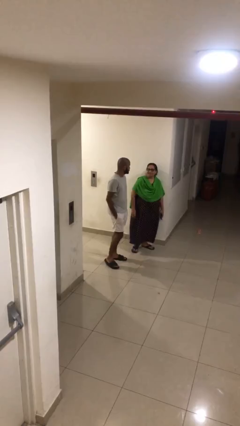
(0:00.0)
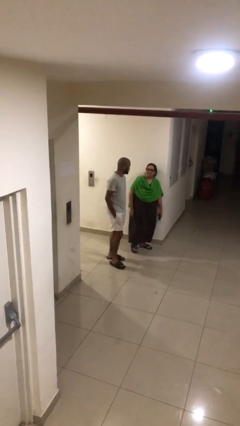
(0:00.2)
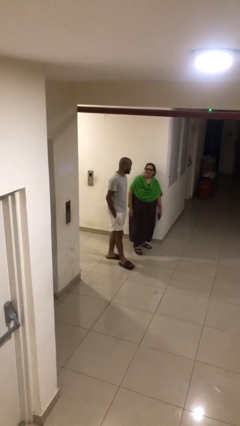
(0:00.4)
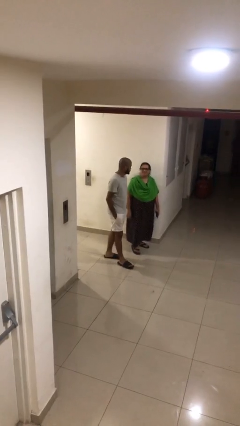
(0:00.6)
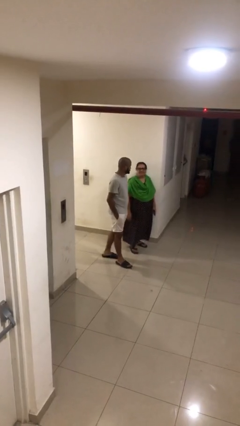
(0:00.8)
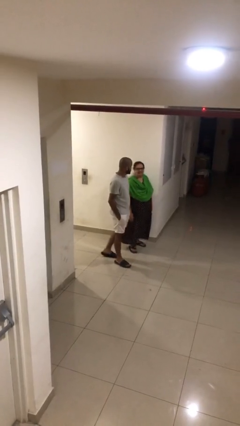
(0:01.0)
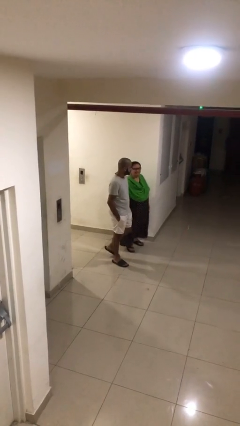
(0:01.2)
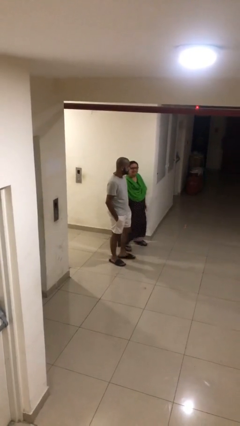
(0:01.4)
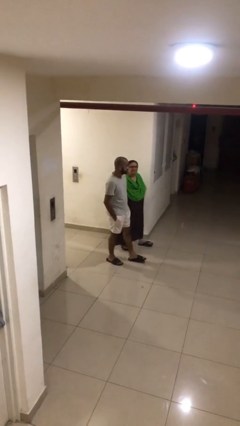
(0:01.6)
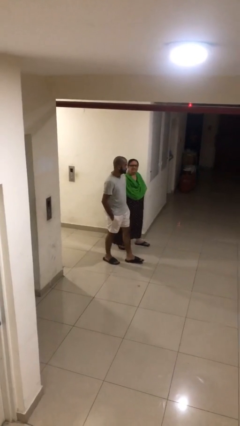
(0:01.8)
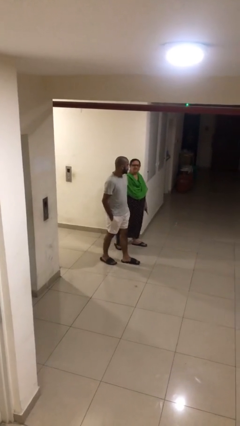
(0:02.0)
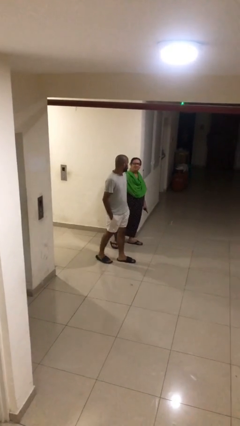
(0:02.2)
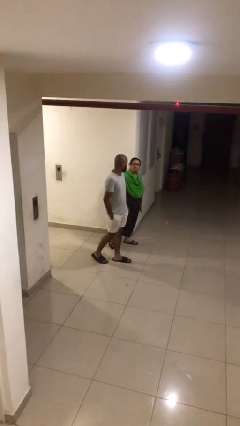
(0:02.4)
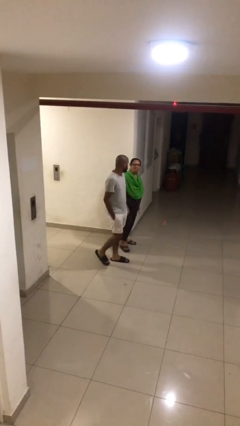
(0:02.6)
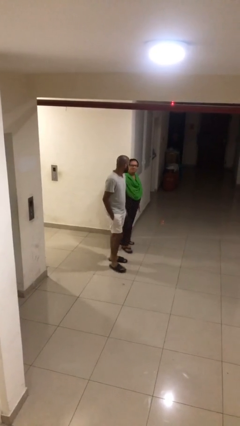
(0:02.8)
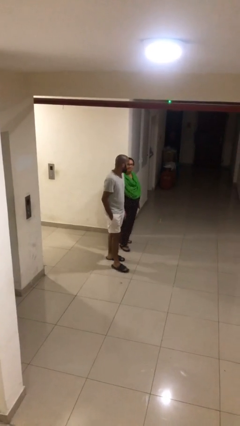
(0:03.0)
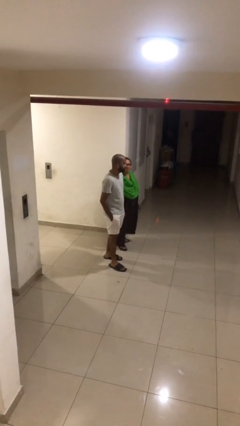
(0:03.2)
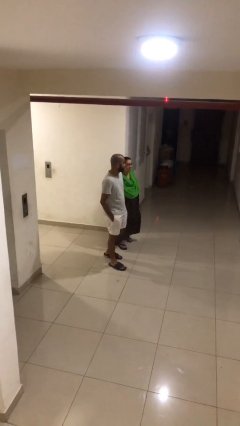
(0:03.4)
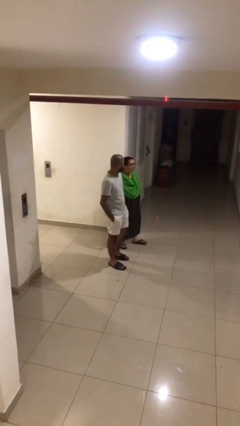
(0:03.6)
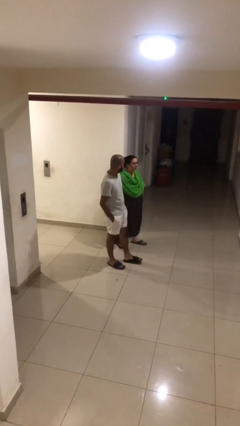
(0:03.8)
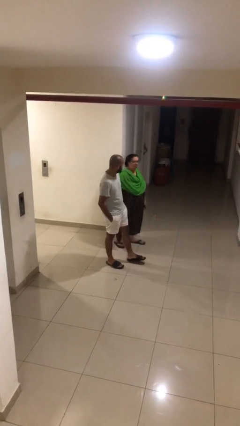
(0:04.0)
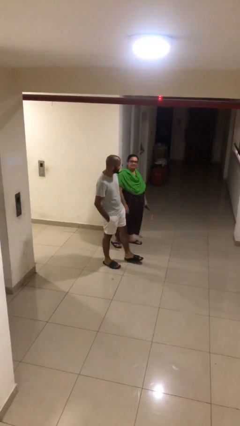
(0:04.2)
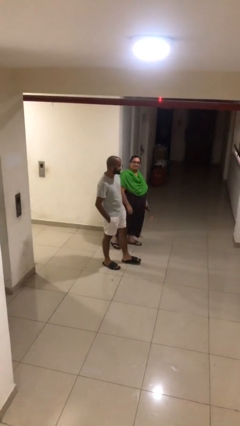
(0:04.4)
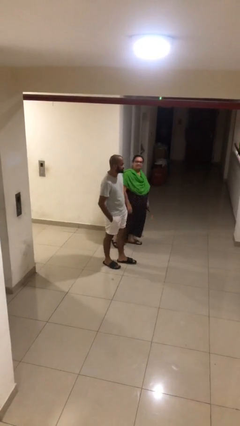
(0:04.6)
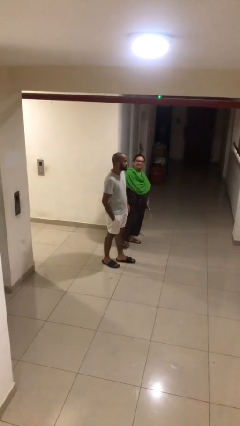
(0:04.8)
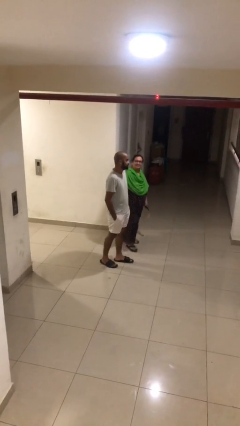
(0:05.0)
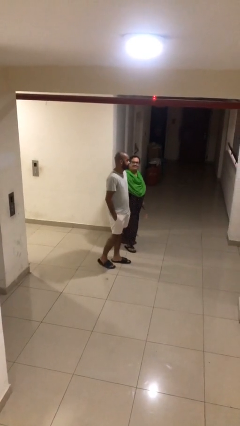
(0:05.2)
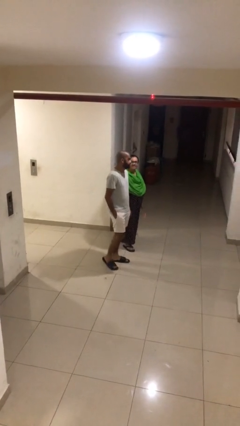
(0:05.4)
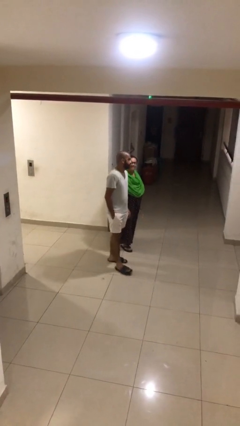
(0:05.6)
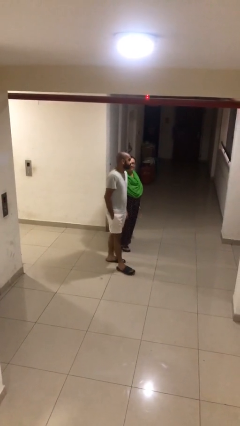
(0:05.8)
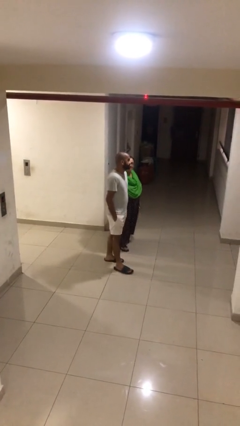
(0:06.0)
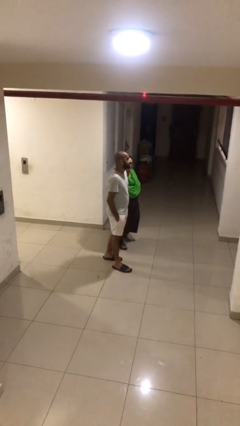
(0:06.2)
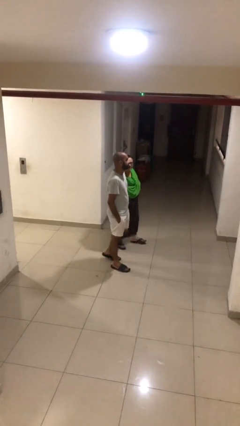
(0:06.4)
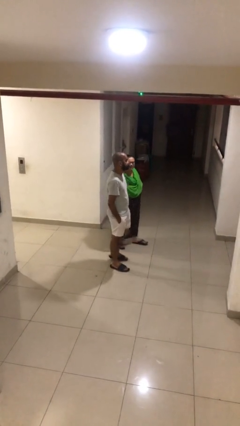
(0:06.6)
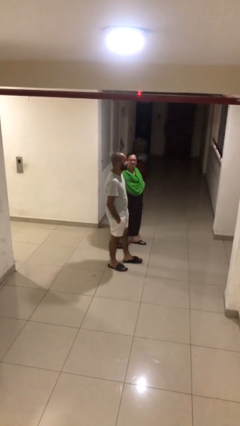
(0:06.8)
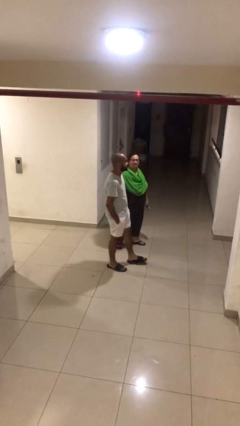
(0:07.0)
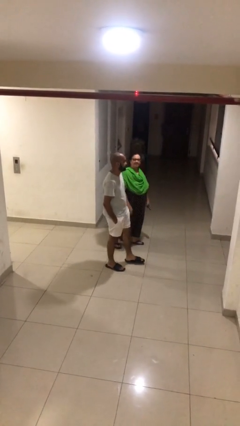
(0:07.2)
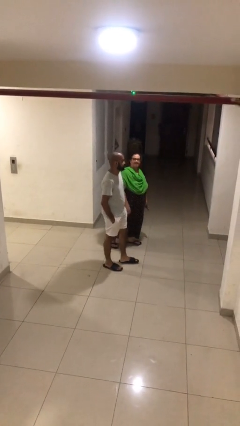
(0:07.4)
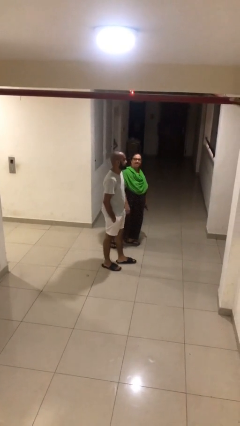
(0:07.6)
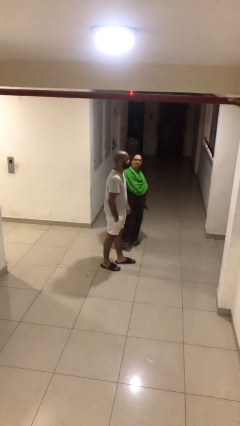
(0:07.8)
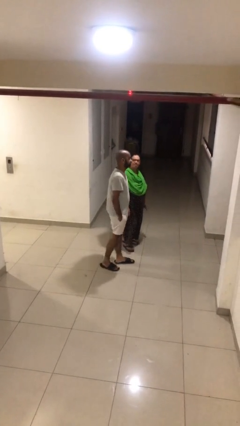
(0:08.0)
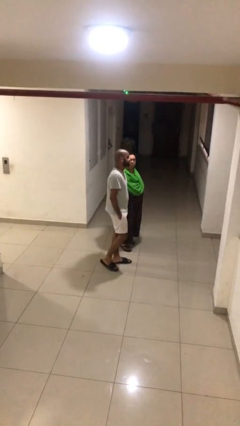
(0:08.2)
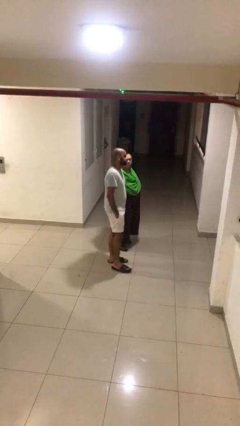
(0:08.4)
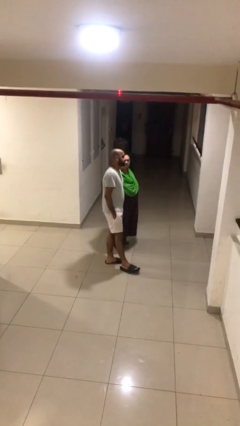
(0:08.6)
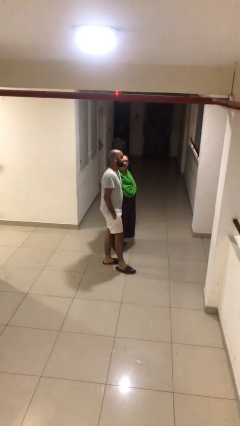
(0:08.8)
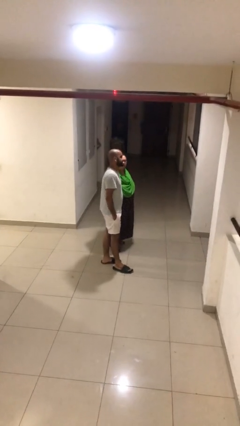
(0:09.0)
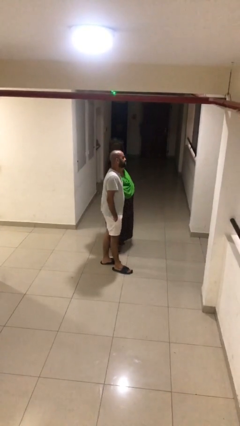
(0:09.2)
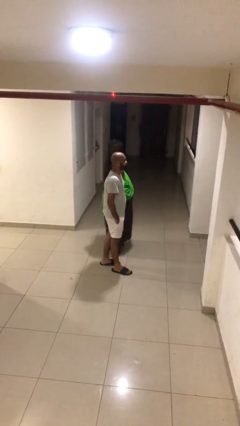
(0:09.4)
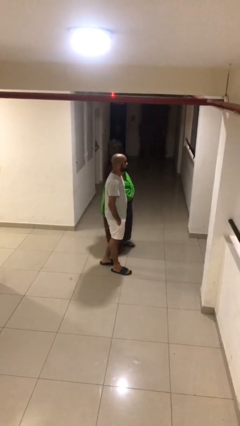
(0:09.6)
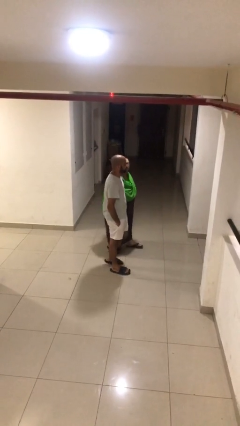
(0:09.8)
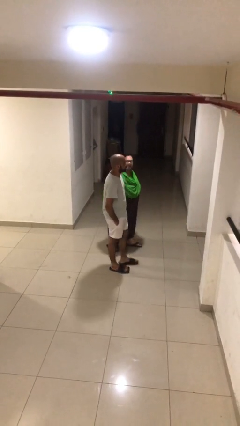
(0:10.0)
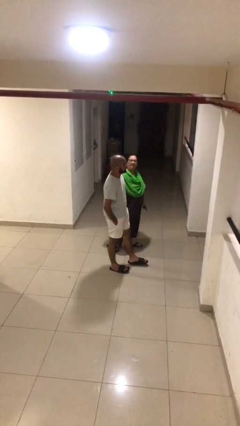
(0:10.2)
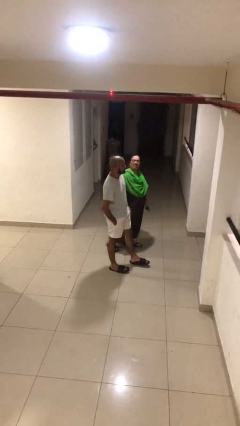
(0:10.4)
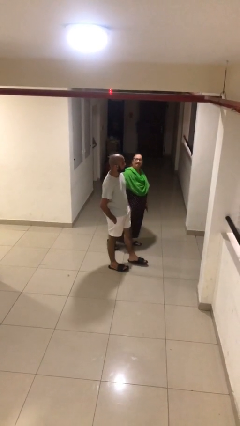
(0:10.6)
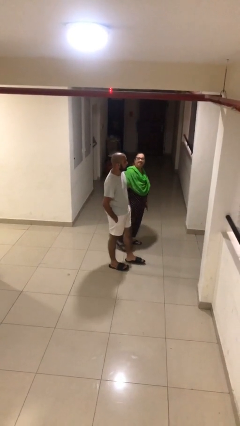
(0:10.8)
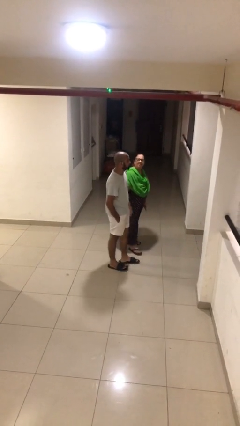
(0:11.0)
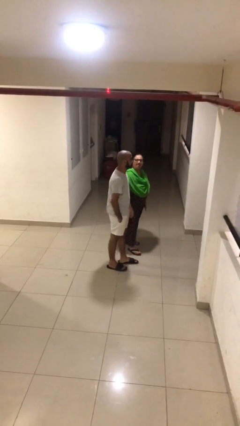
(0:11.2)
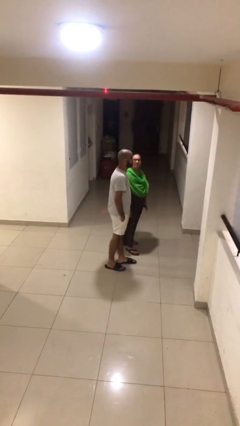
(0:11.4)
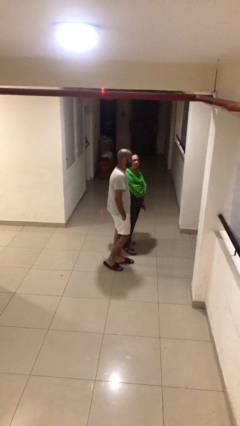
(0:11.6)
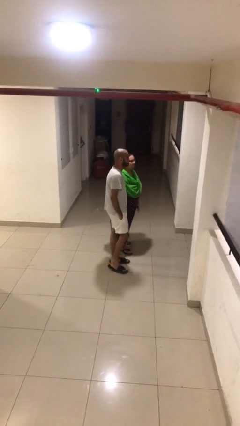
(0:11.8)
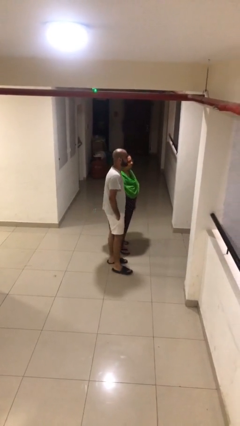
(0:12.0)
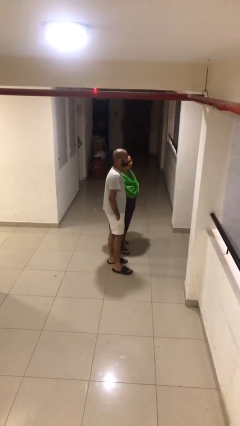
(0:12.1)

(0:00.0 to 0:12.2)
person talks to person

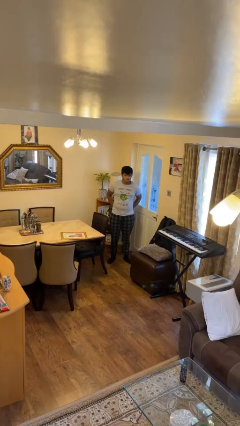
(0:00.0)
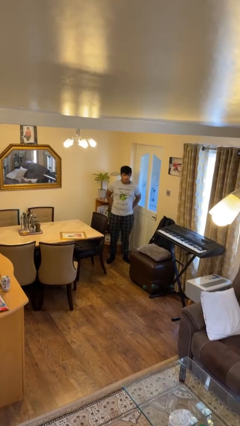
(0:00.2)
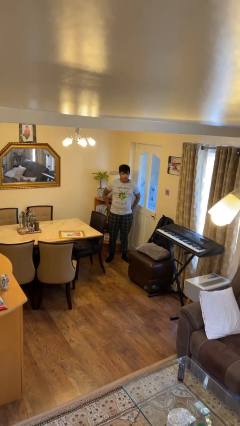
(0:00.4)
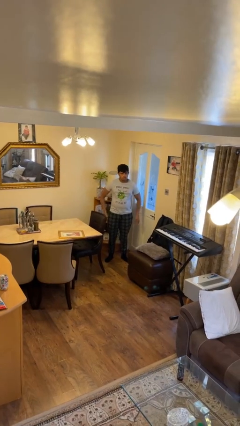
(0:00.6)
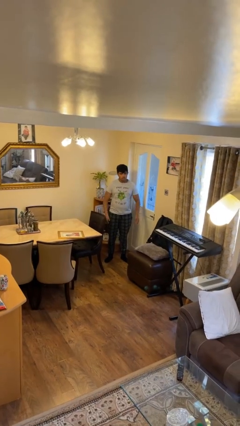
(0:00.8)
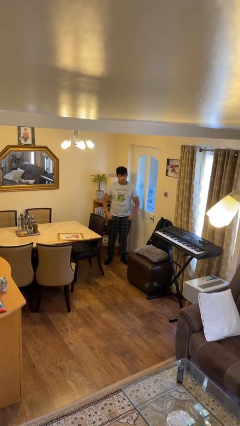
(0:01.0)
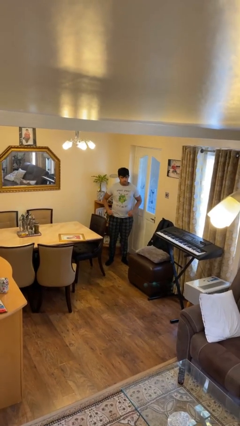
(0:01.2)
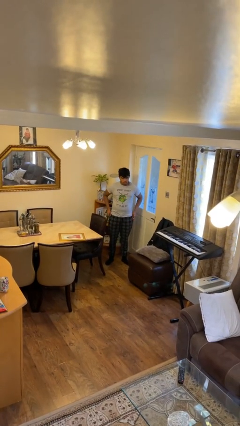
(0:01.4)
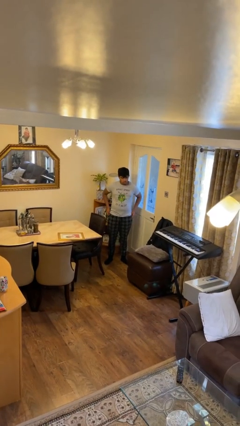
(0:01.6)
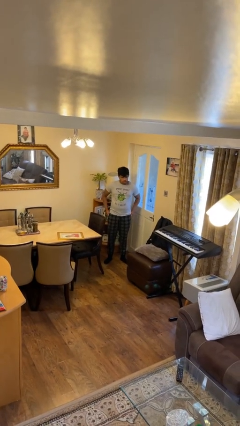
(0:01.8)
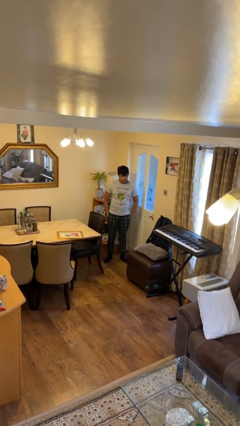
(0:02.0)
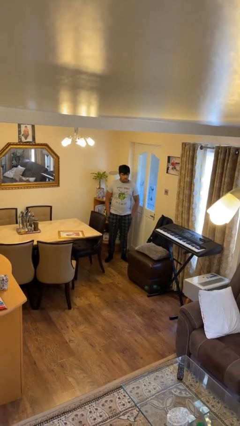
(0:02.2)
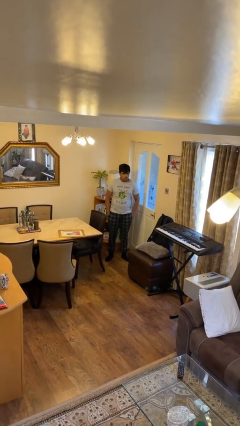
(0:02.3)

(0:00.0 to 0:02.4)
person puts hands in back pockets

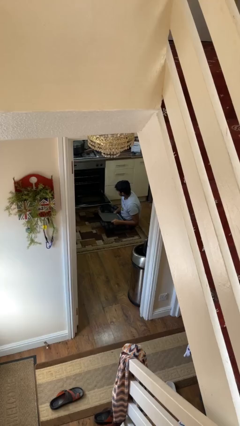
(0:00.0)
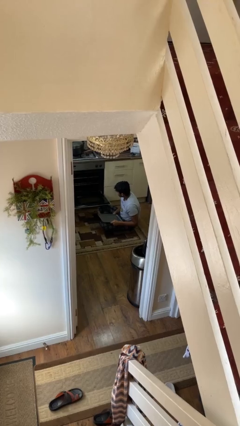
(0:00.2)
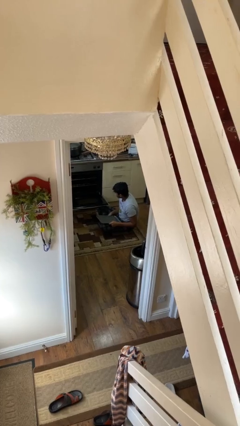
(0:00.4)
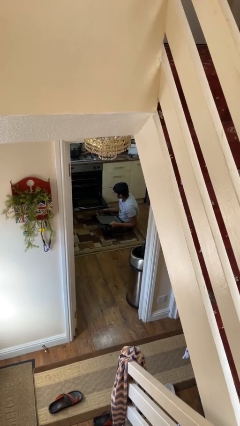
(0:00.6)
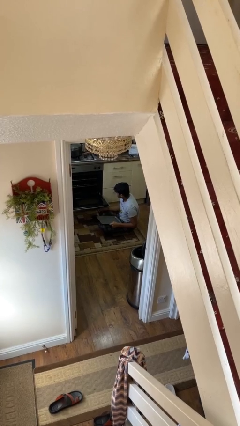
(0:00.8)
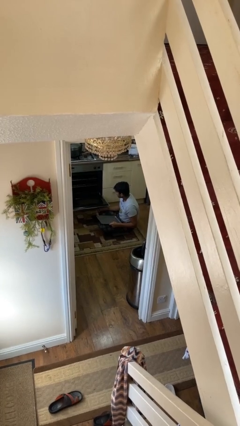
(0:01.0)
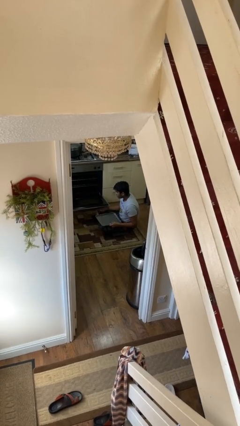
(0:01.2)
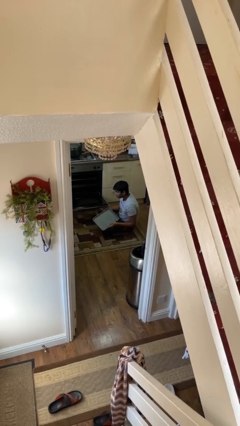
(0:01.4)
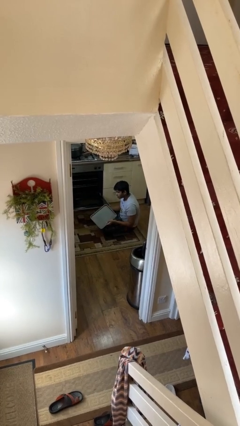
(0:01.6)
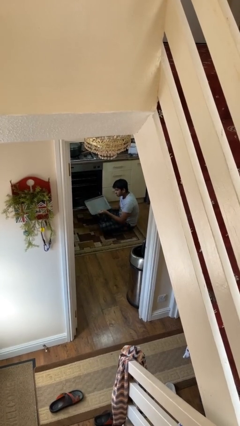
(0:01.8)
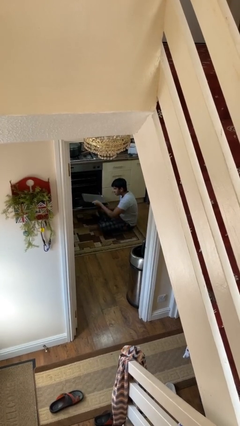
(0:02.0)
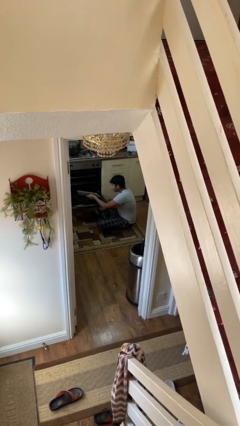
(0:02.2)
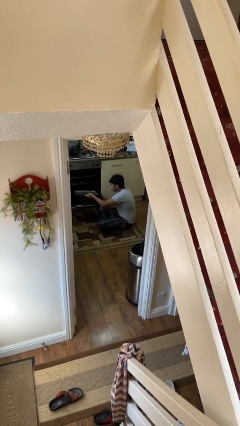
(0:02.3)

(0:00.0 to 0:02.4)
person puts object into oven

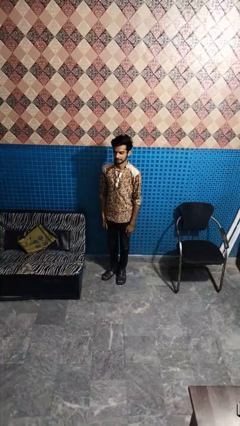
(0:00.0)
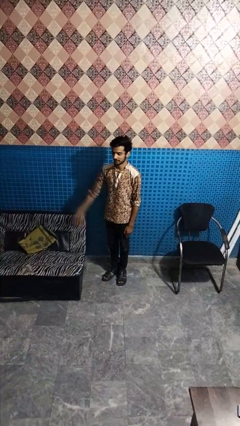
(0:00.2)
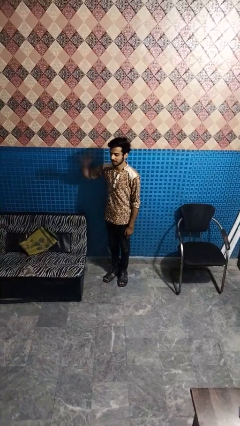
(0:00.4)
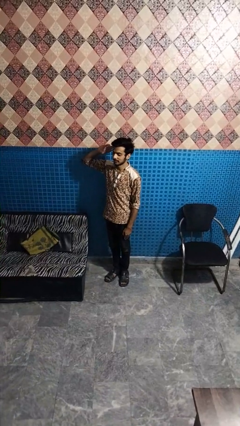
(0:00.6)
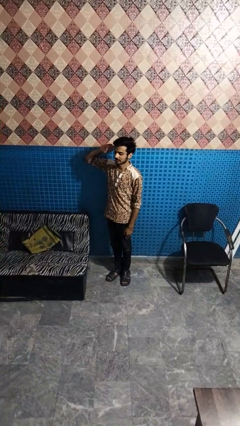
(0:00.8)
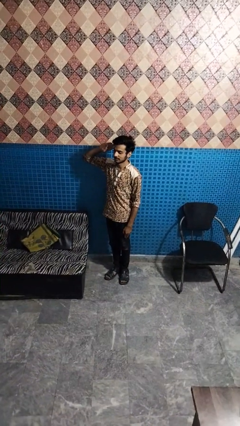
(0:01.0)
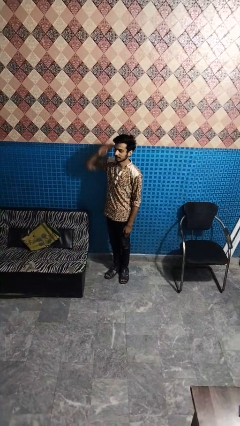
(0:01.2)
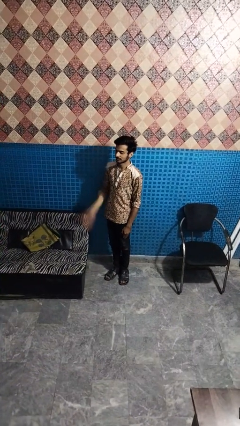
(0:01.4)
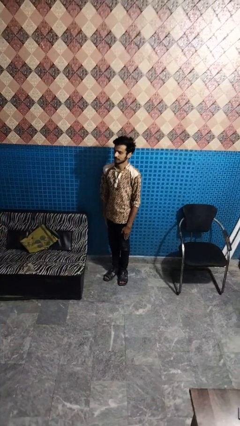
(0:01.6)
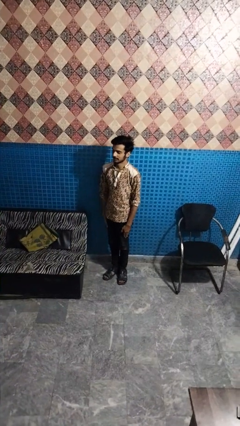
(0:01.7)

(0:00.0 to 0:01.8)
person salutes
